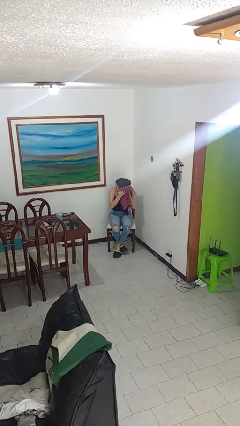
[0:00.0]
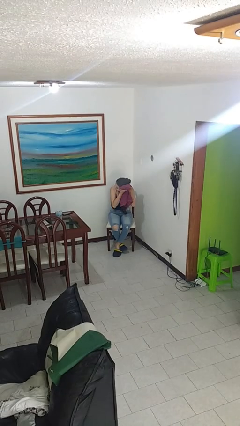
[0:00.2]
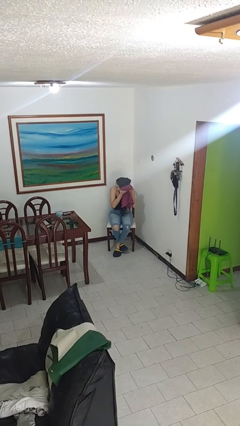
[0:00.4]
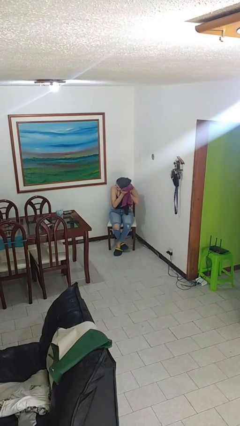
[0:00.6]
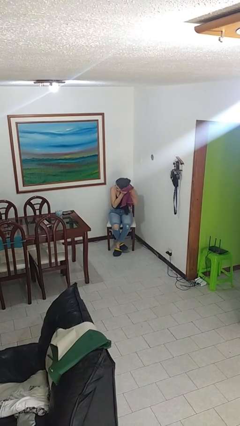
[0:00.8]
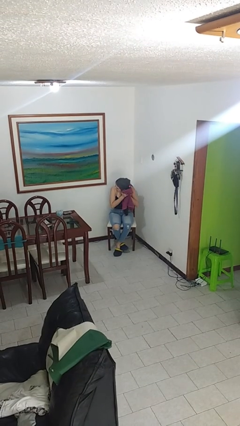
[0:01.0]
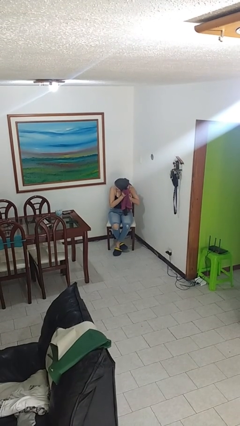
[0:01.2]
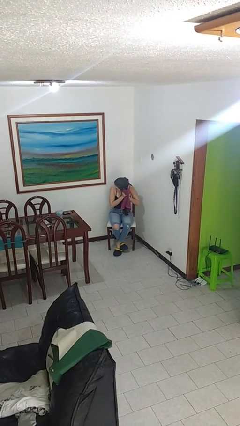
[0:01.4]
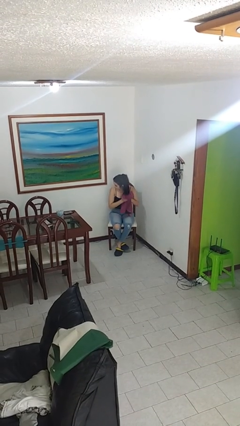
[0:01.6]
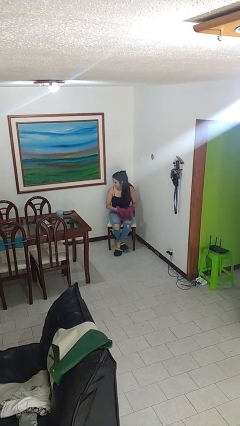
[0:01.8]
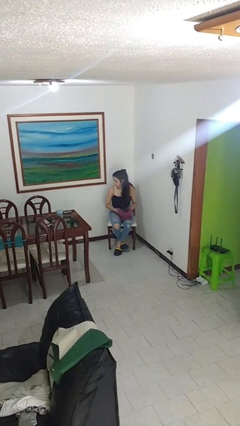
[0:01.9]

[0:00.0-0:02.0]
person dries hair with towel

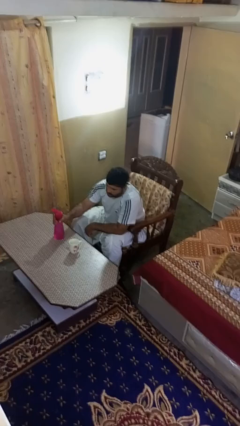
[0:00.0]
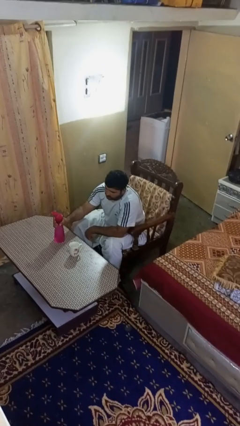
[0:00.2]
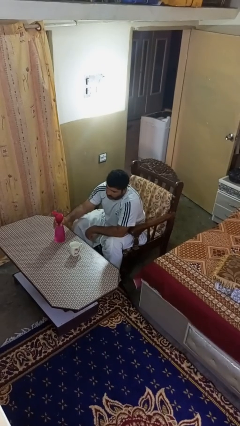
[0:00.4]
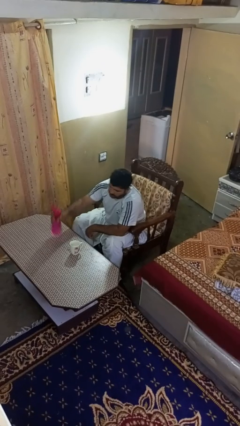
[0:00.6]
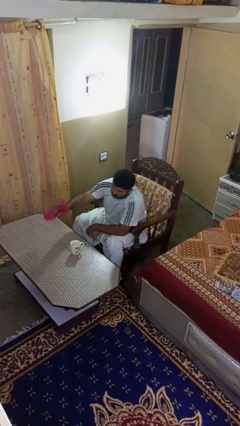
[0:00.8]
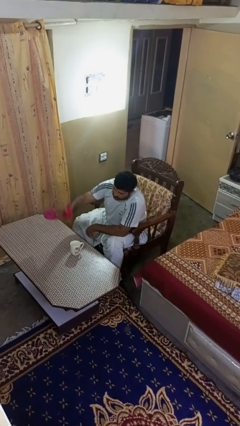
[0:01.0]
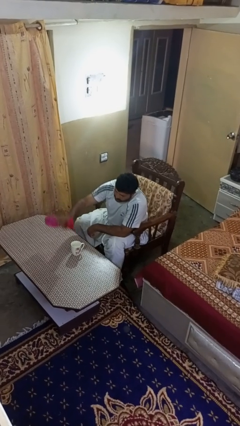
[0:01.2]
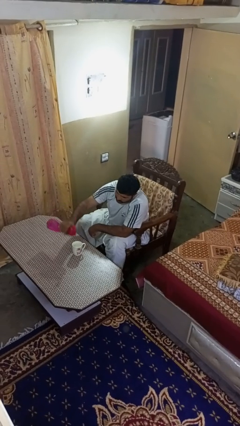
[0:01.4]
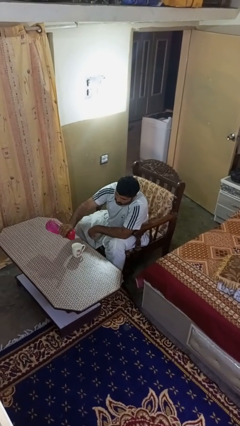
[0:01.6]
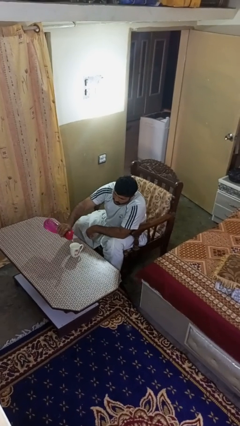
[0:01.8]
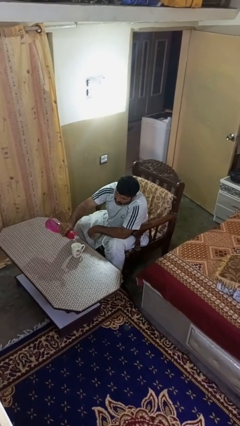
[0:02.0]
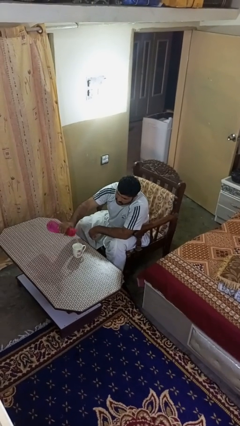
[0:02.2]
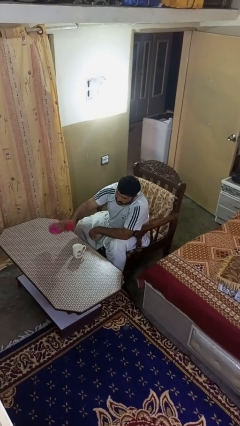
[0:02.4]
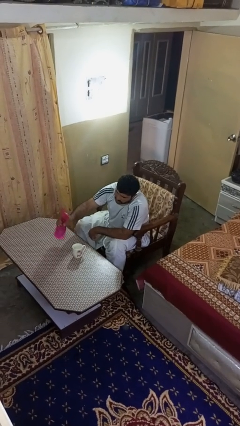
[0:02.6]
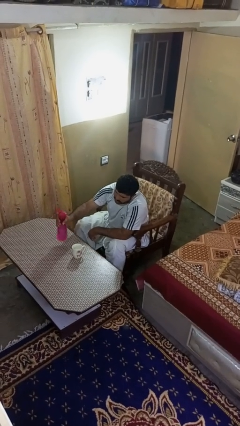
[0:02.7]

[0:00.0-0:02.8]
person pours liquid into cup

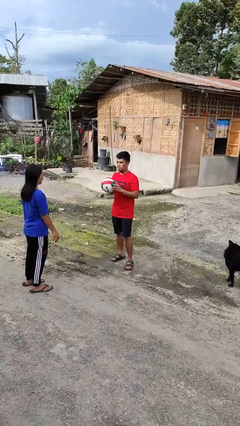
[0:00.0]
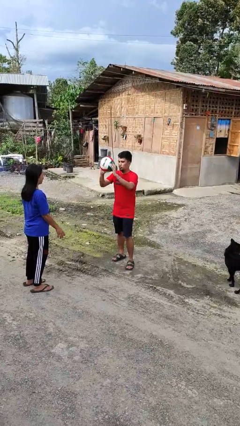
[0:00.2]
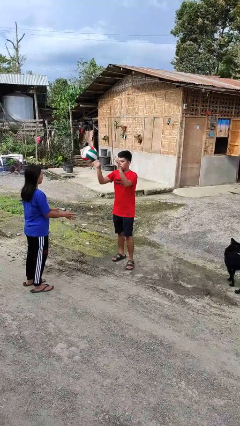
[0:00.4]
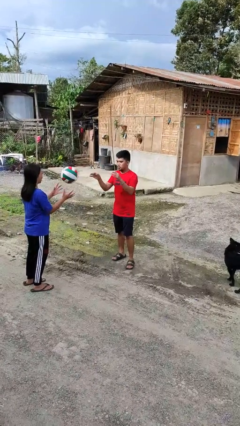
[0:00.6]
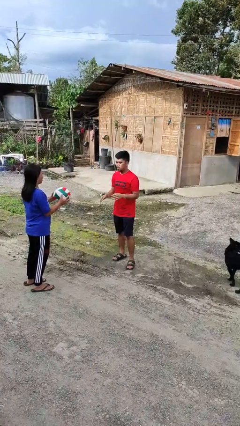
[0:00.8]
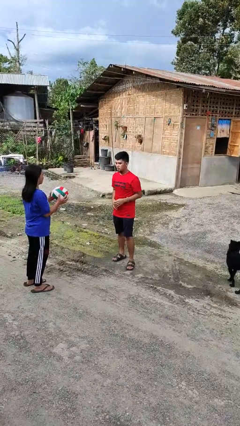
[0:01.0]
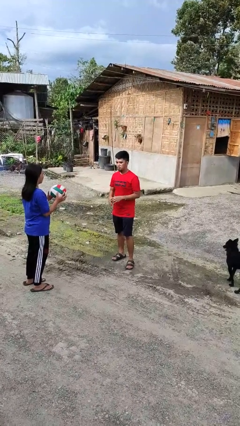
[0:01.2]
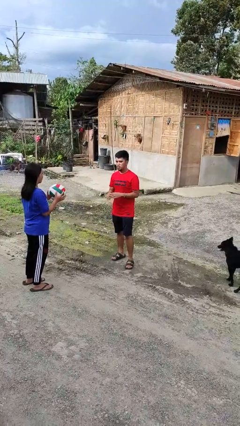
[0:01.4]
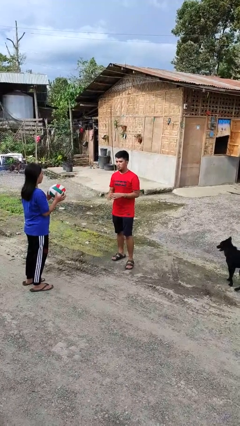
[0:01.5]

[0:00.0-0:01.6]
person throws object to person

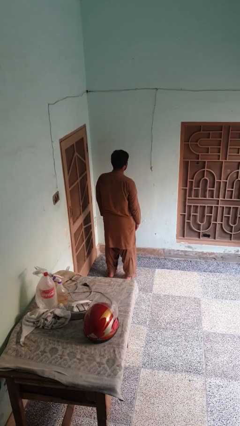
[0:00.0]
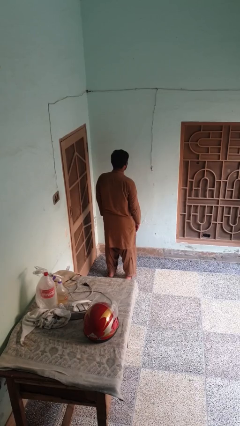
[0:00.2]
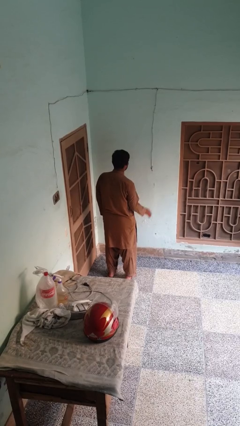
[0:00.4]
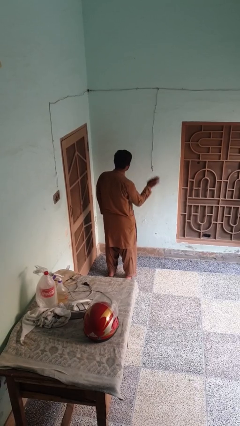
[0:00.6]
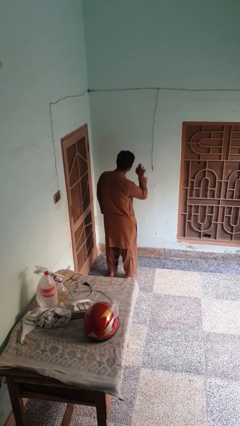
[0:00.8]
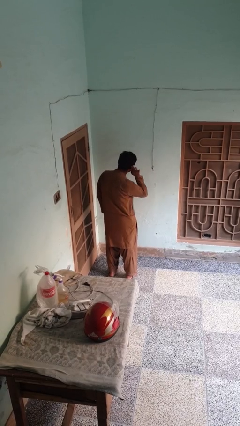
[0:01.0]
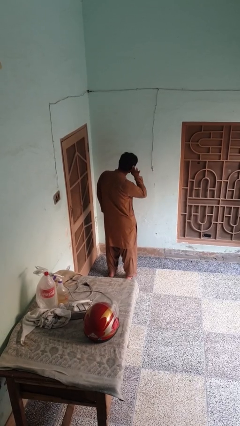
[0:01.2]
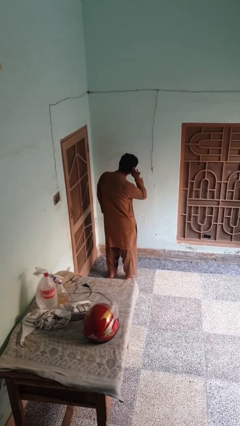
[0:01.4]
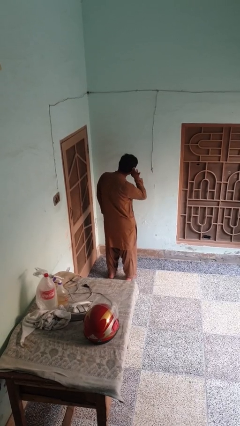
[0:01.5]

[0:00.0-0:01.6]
person gestures listen closely

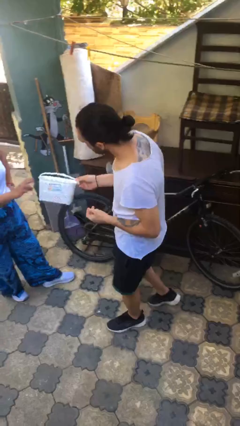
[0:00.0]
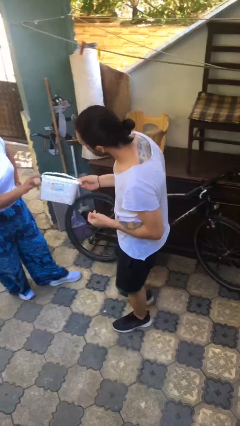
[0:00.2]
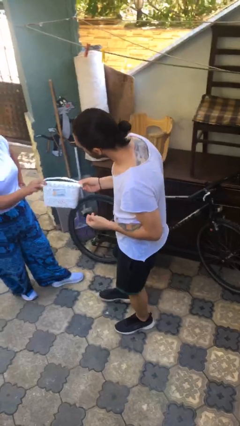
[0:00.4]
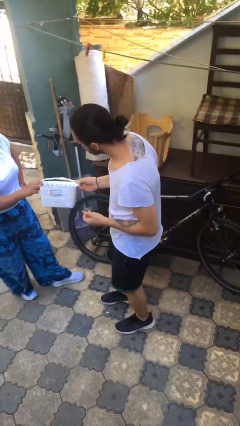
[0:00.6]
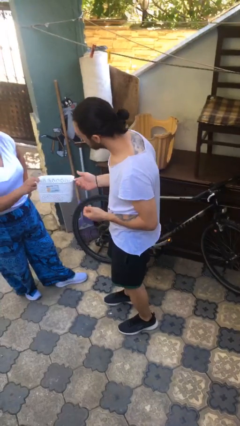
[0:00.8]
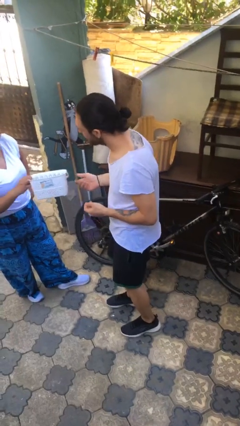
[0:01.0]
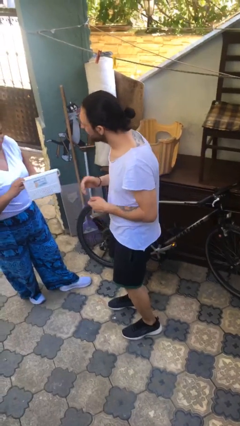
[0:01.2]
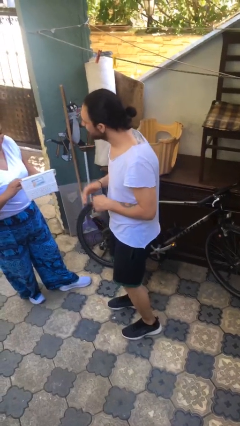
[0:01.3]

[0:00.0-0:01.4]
person transfers object to person

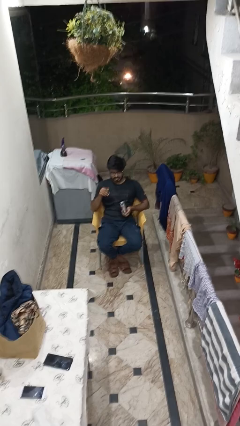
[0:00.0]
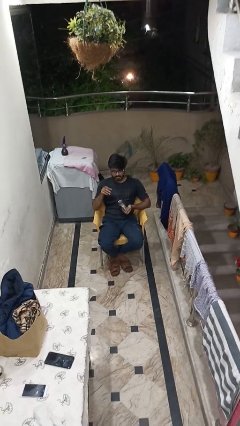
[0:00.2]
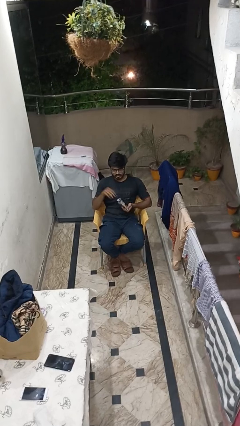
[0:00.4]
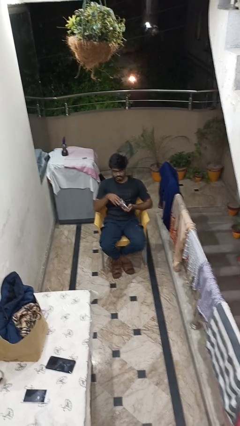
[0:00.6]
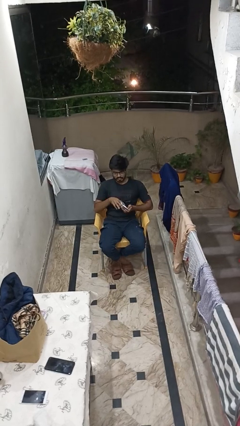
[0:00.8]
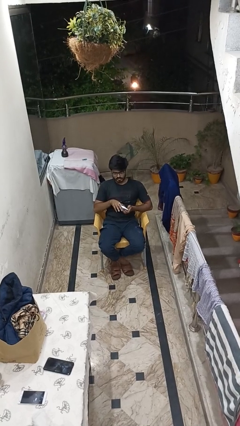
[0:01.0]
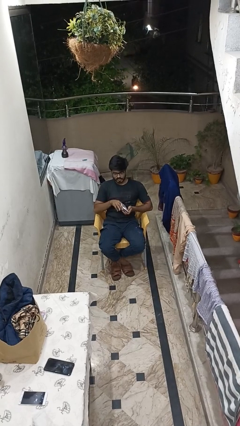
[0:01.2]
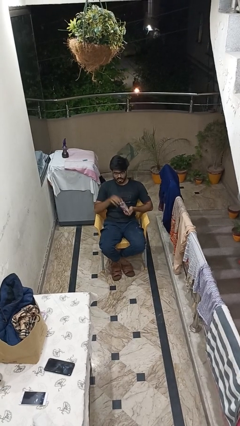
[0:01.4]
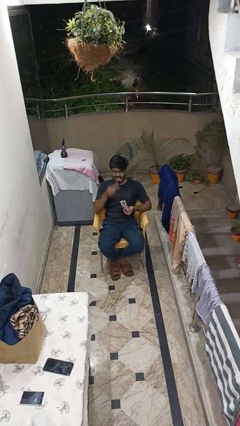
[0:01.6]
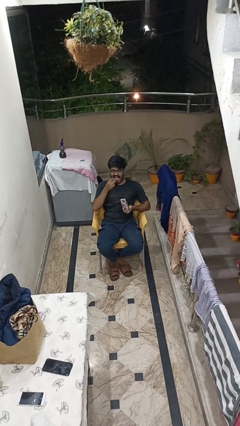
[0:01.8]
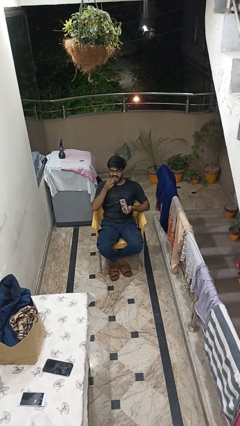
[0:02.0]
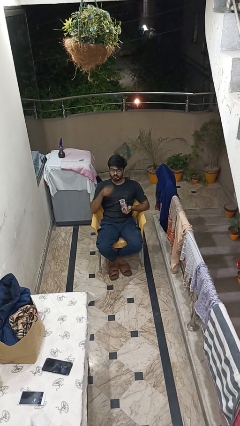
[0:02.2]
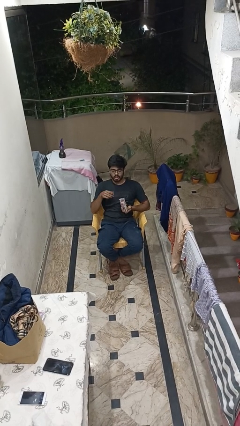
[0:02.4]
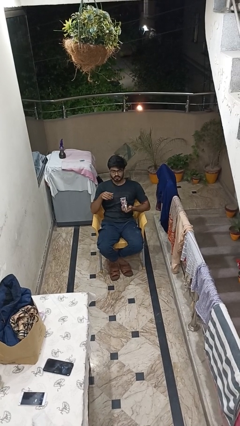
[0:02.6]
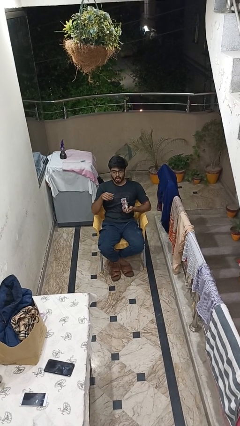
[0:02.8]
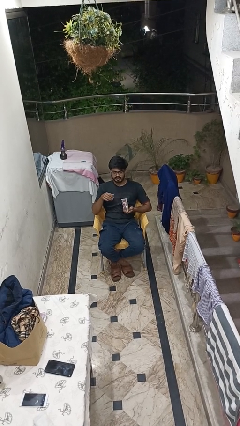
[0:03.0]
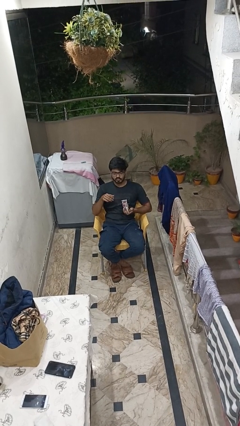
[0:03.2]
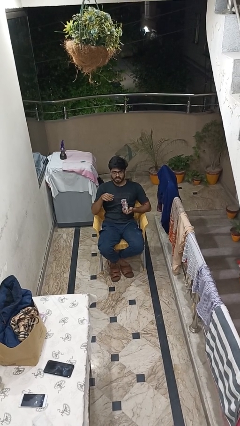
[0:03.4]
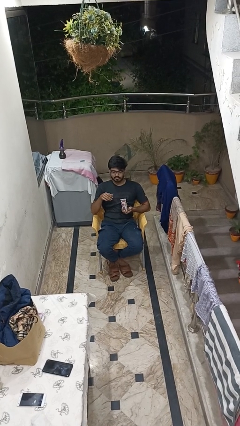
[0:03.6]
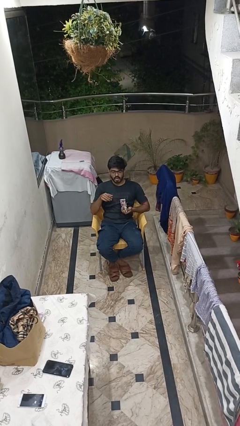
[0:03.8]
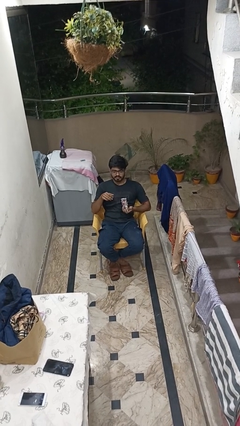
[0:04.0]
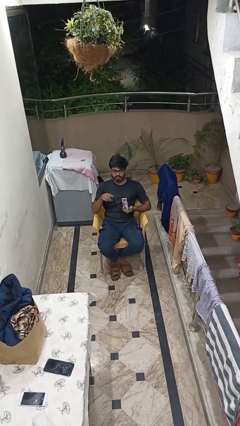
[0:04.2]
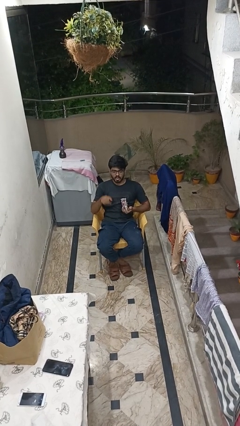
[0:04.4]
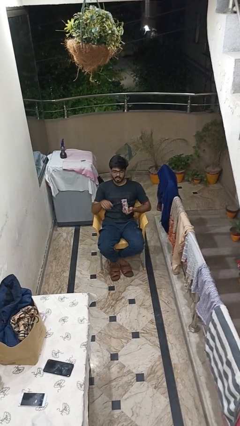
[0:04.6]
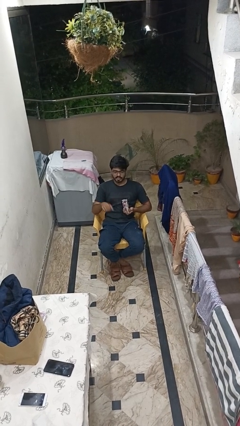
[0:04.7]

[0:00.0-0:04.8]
person eats snack from bag

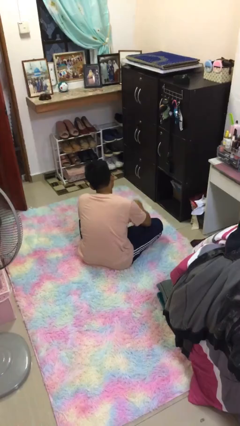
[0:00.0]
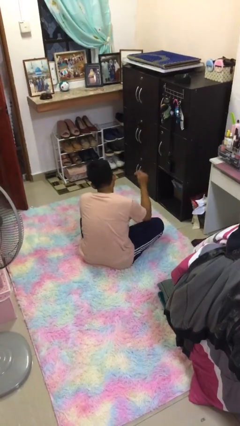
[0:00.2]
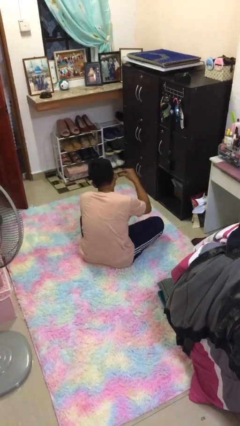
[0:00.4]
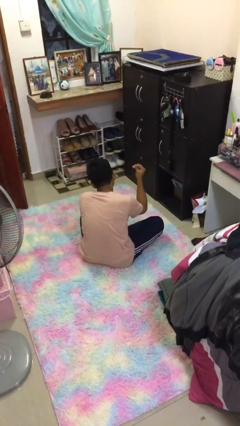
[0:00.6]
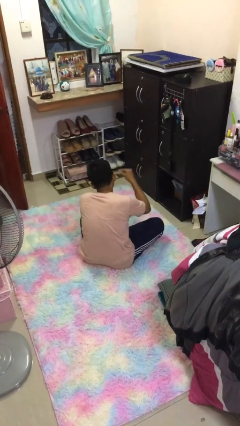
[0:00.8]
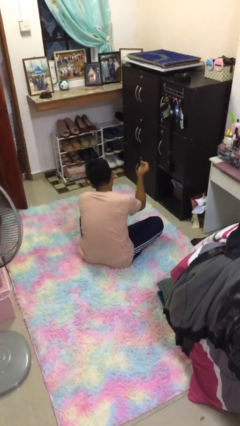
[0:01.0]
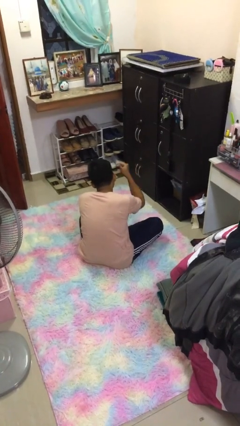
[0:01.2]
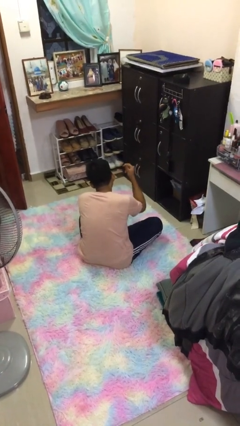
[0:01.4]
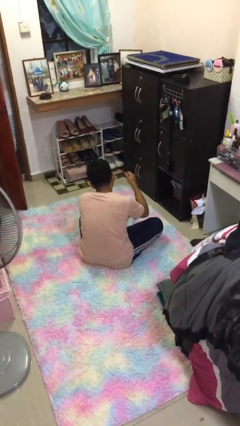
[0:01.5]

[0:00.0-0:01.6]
person snaps fingers

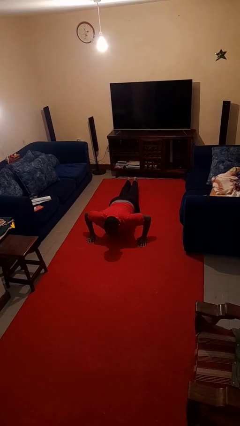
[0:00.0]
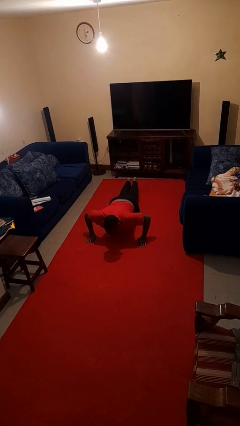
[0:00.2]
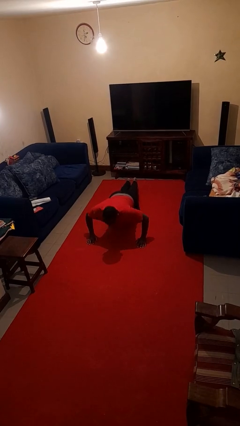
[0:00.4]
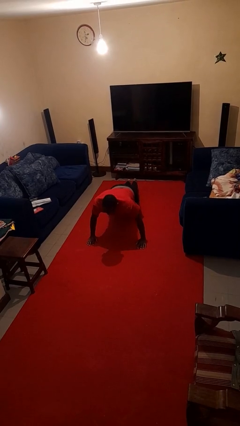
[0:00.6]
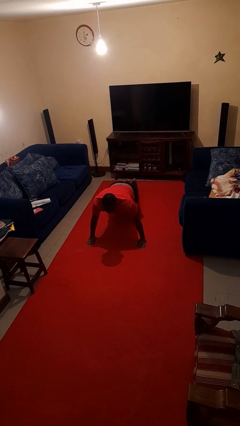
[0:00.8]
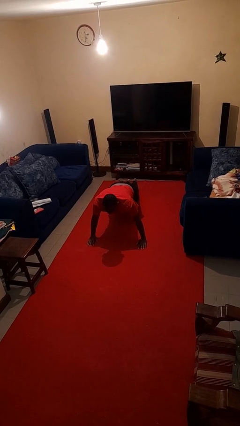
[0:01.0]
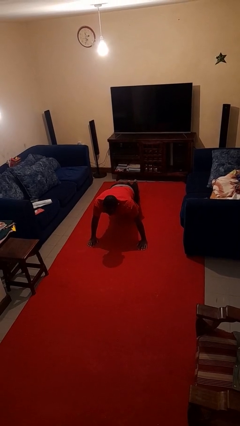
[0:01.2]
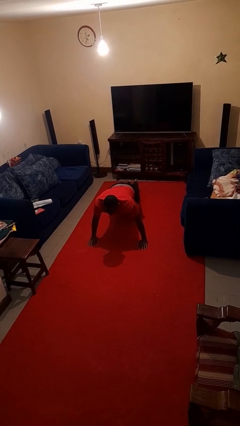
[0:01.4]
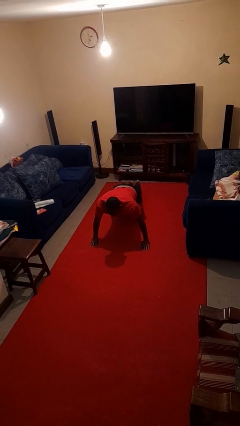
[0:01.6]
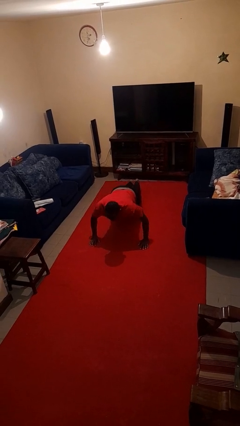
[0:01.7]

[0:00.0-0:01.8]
person exercises with pushup
